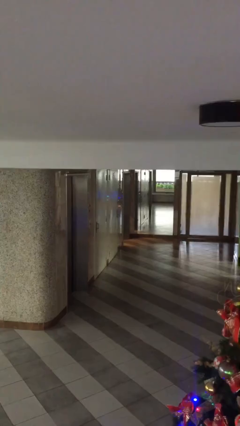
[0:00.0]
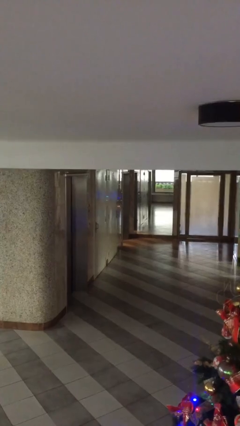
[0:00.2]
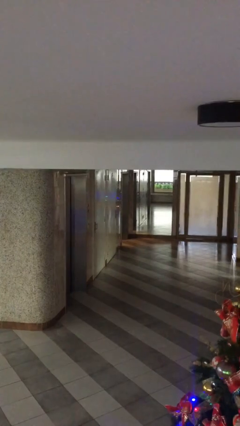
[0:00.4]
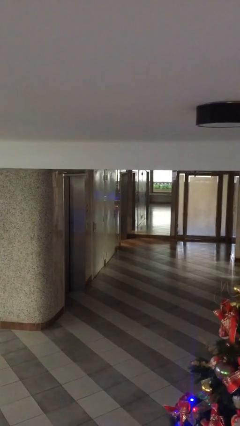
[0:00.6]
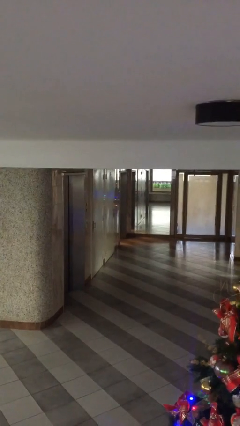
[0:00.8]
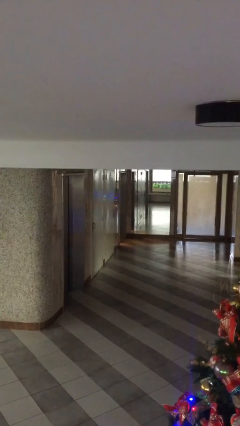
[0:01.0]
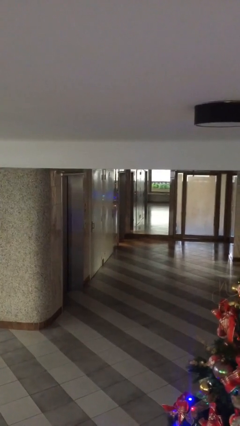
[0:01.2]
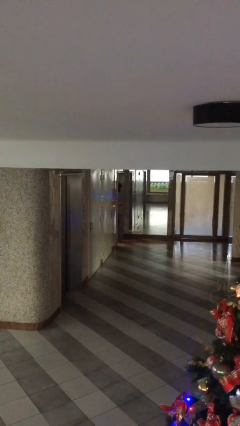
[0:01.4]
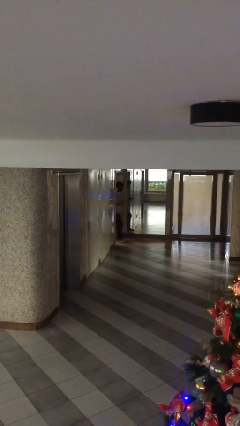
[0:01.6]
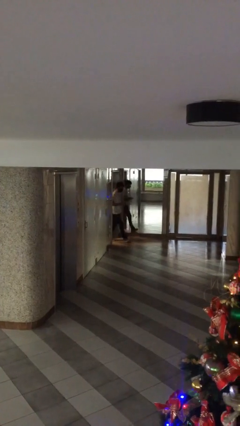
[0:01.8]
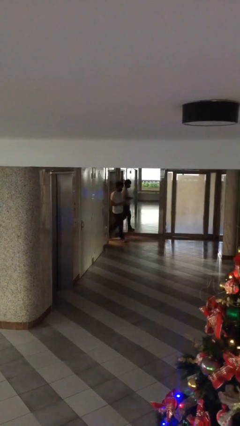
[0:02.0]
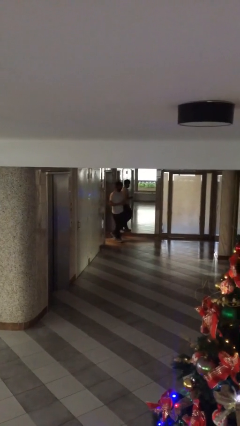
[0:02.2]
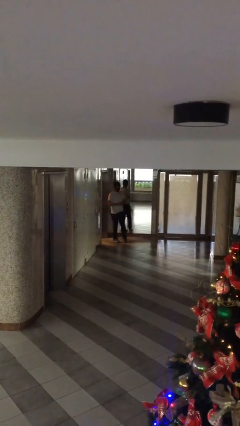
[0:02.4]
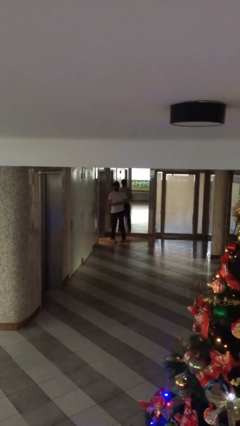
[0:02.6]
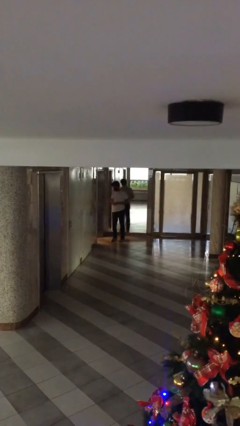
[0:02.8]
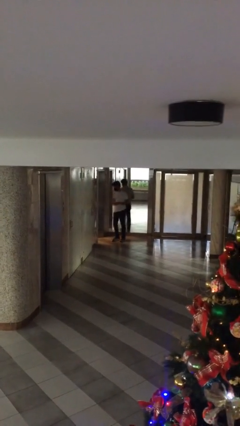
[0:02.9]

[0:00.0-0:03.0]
person enters scene through structure

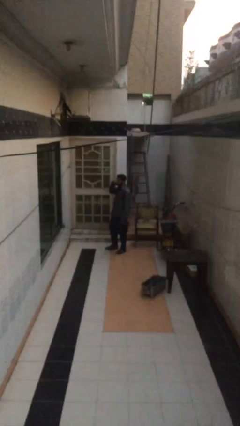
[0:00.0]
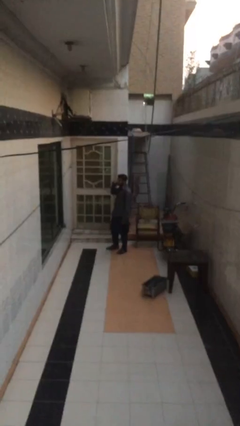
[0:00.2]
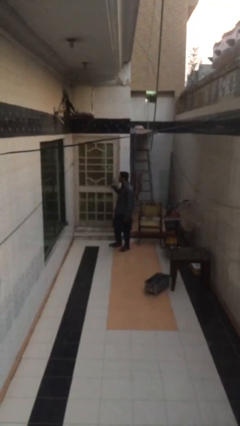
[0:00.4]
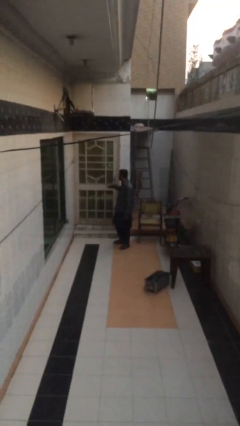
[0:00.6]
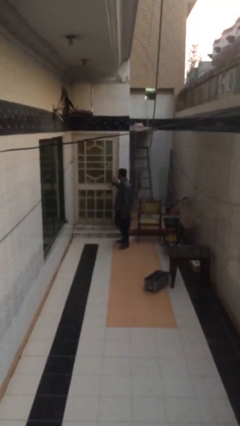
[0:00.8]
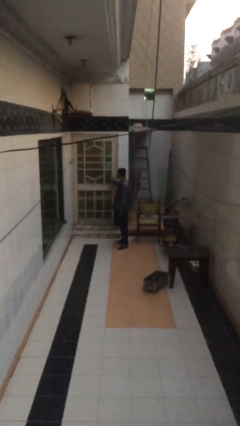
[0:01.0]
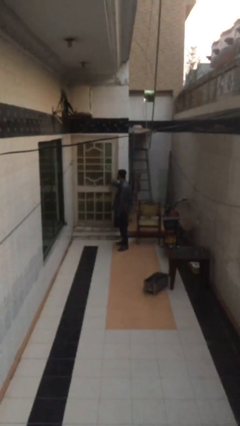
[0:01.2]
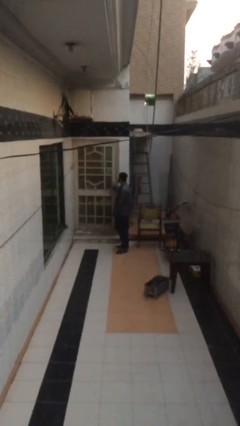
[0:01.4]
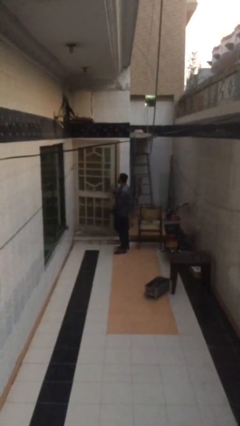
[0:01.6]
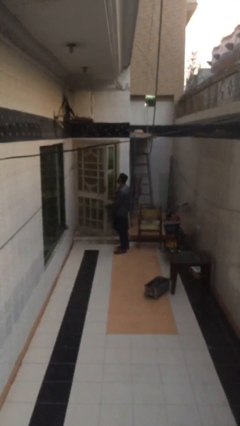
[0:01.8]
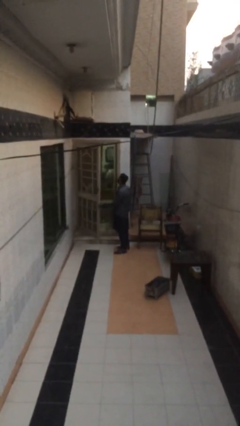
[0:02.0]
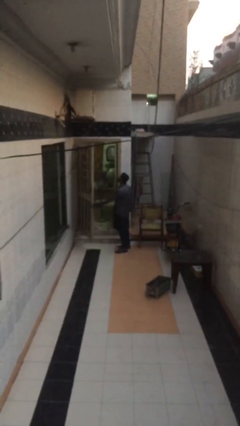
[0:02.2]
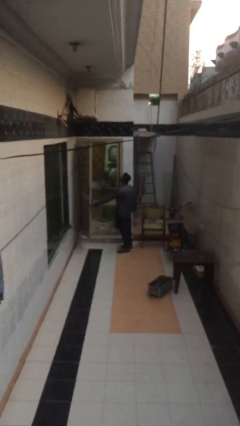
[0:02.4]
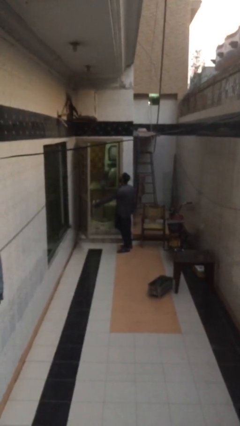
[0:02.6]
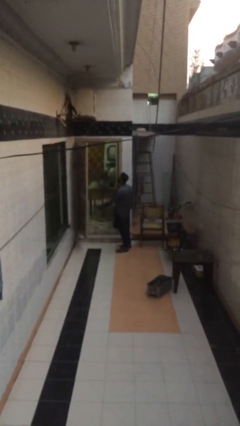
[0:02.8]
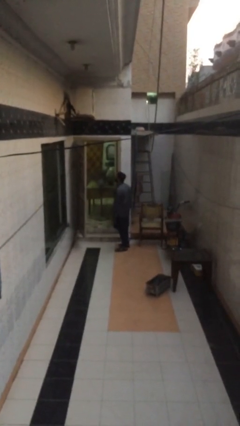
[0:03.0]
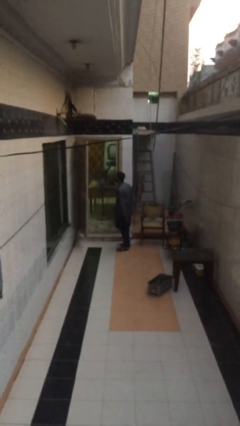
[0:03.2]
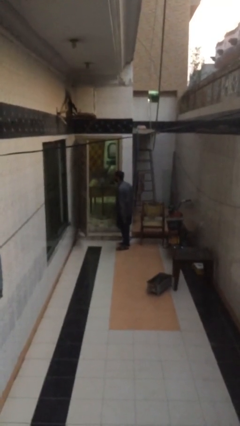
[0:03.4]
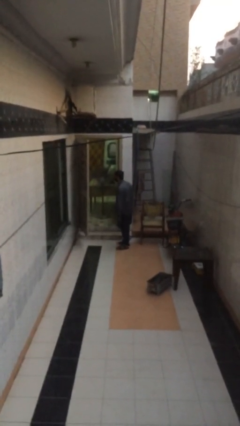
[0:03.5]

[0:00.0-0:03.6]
person opens facility door

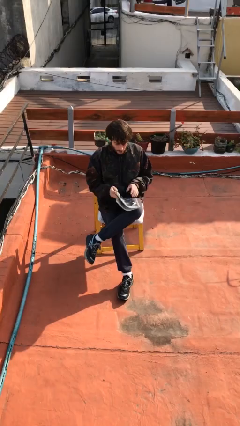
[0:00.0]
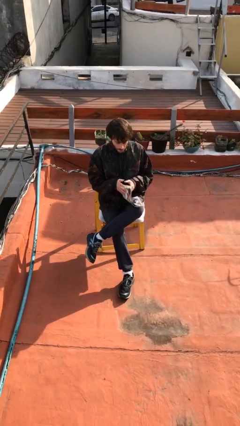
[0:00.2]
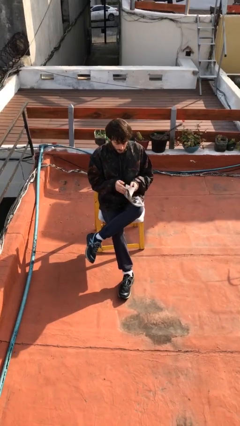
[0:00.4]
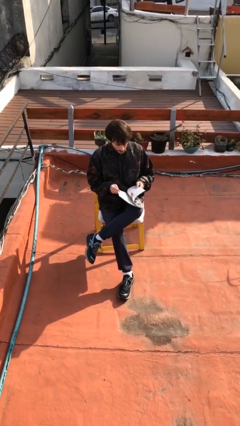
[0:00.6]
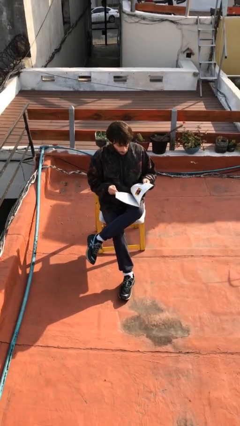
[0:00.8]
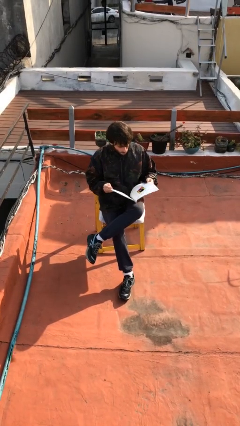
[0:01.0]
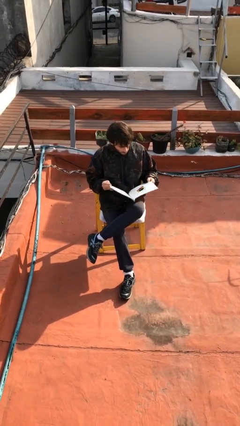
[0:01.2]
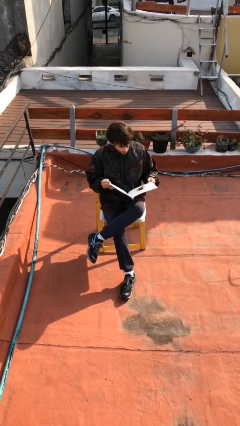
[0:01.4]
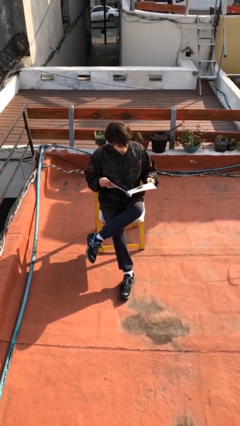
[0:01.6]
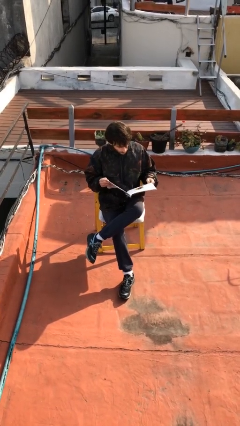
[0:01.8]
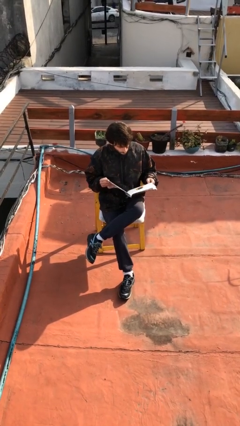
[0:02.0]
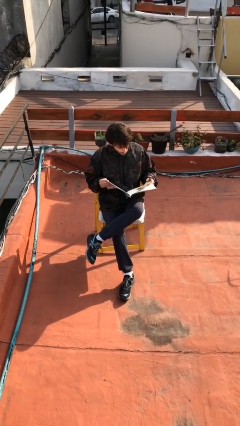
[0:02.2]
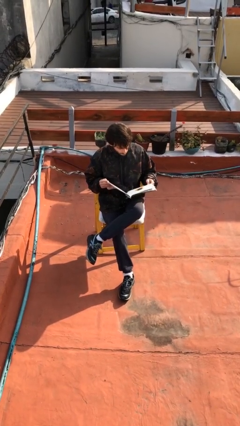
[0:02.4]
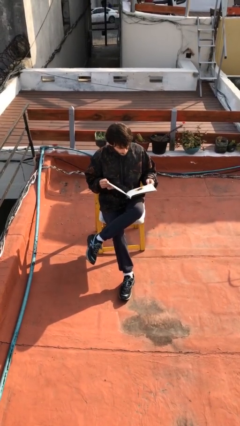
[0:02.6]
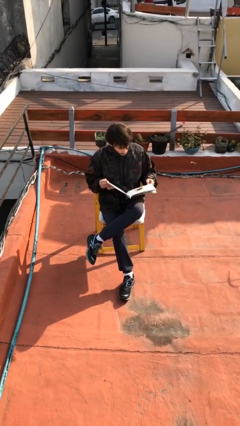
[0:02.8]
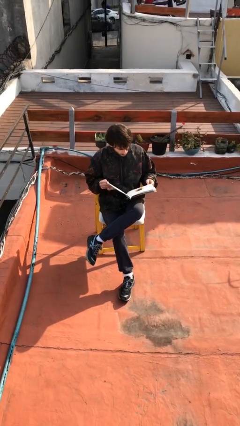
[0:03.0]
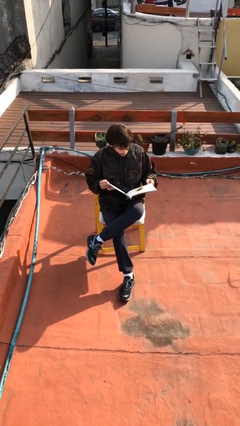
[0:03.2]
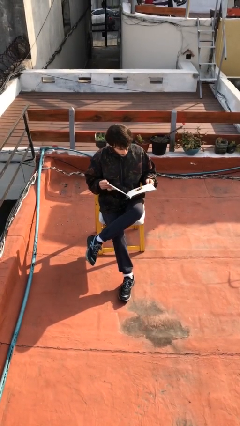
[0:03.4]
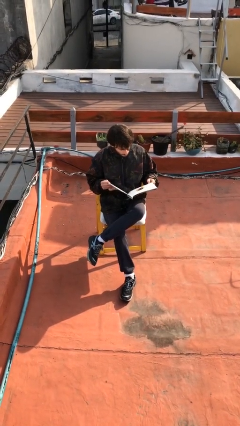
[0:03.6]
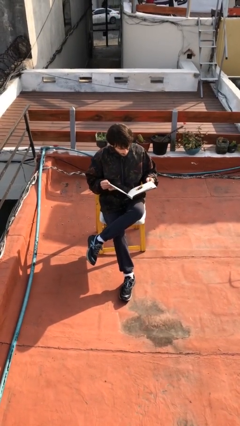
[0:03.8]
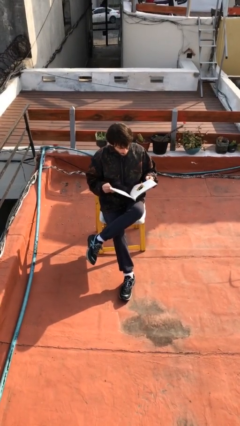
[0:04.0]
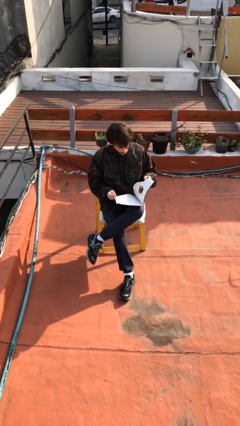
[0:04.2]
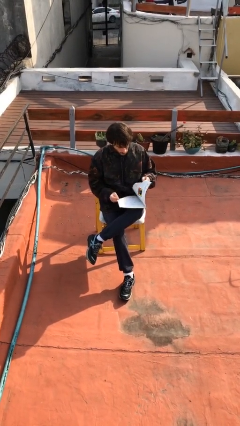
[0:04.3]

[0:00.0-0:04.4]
person reads magazine

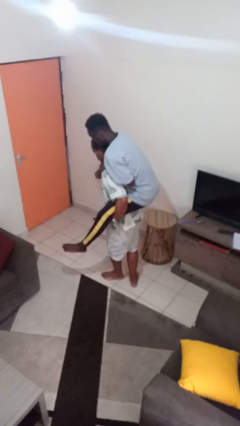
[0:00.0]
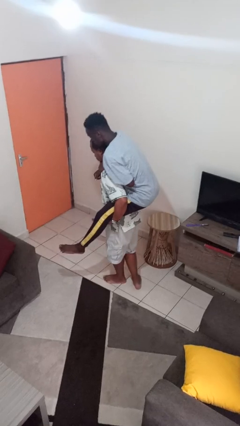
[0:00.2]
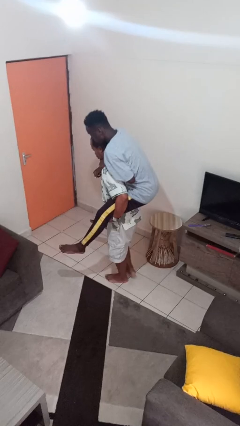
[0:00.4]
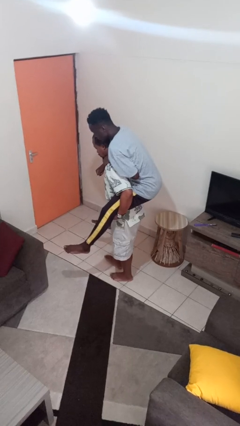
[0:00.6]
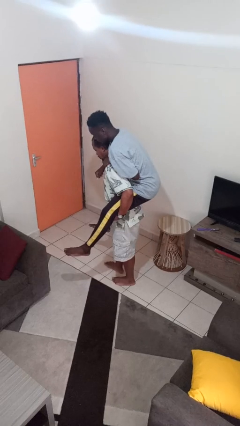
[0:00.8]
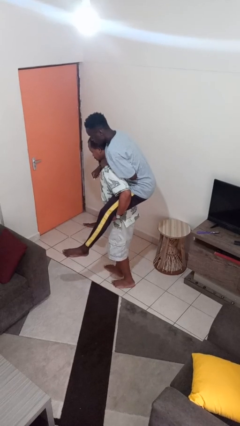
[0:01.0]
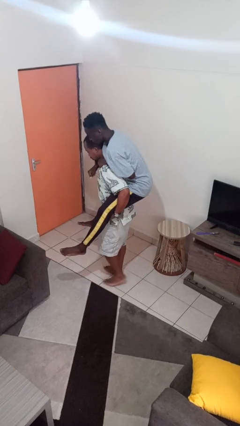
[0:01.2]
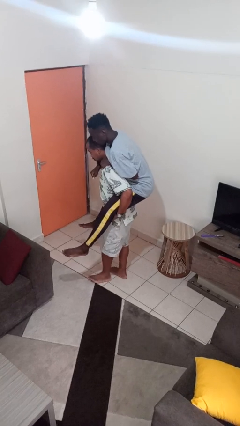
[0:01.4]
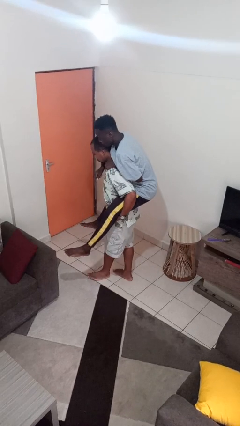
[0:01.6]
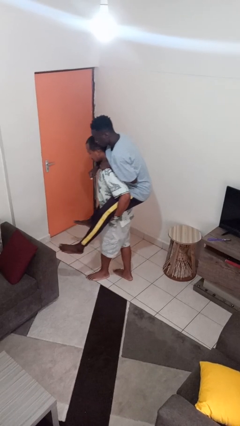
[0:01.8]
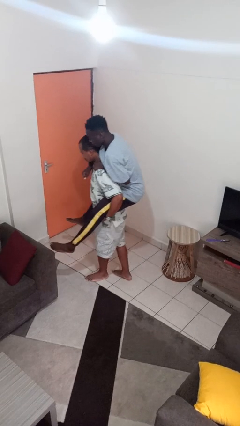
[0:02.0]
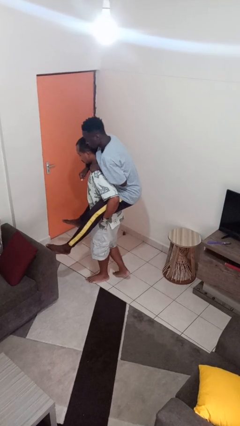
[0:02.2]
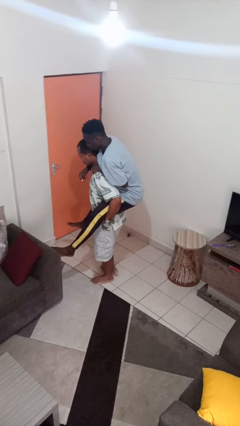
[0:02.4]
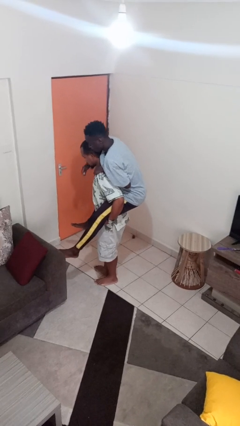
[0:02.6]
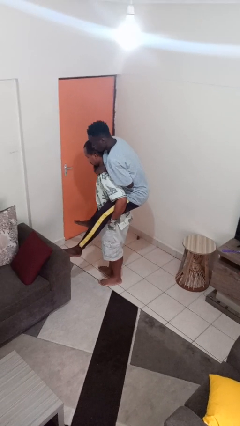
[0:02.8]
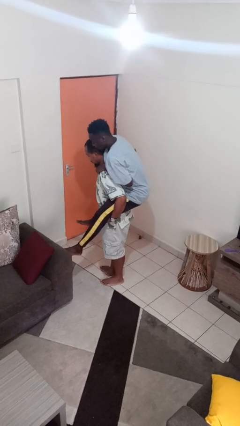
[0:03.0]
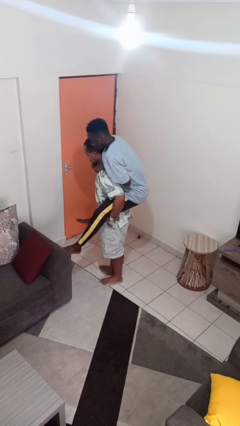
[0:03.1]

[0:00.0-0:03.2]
person carries person on back

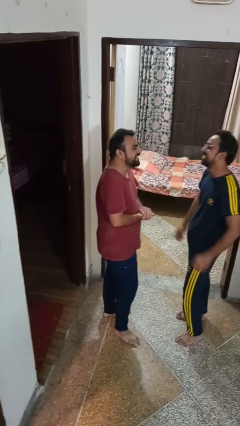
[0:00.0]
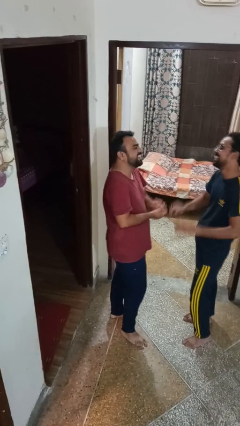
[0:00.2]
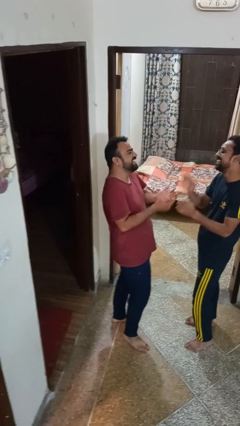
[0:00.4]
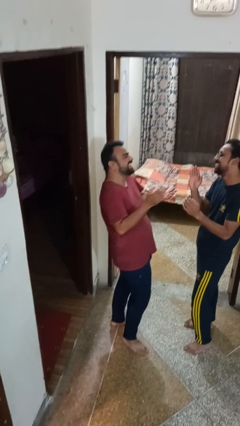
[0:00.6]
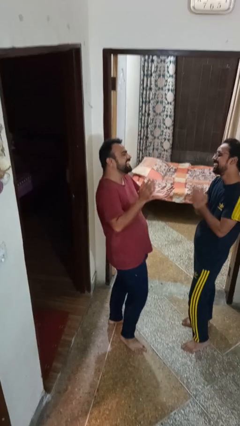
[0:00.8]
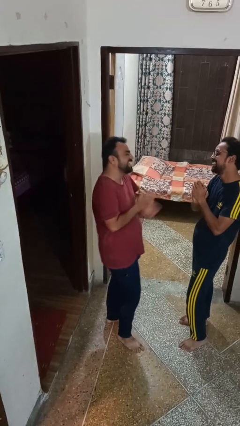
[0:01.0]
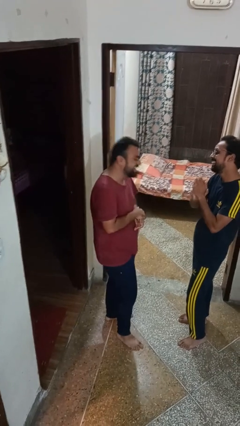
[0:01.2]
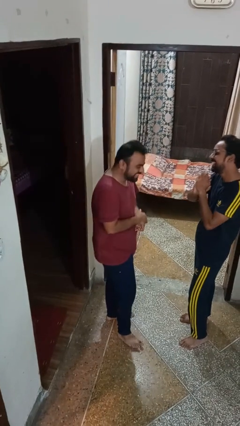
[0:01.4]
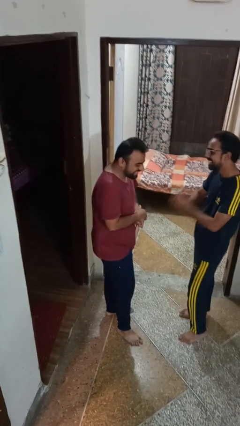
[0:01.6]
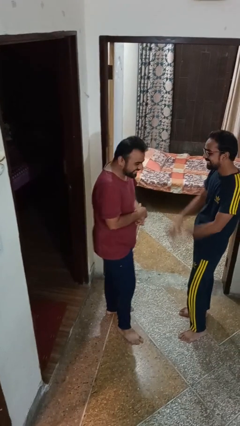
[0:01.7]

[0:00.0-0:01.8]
person laughs with person

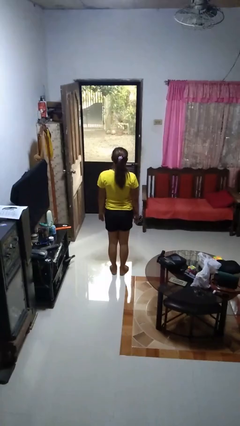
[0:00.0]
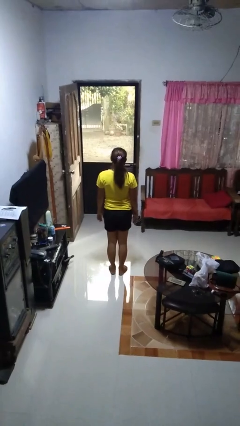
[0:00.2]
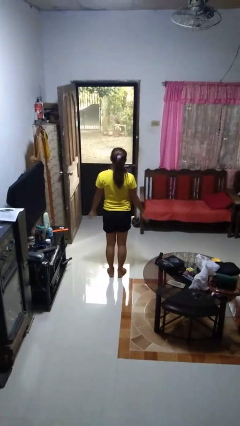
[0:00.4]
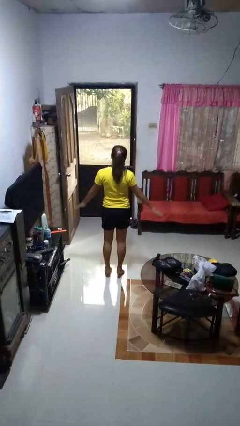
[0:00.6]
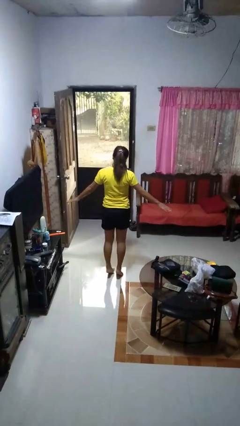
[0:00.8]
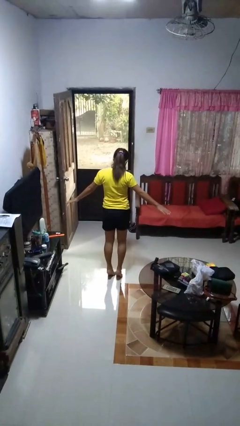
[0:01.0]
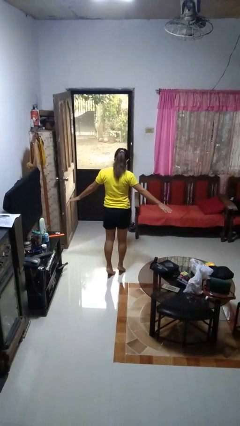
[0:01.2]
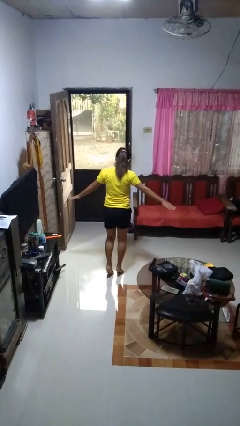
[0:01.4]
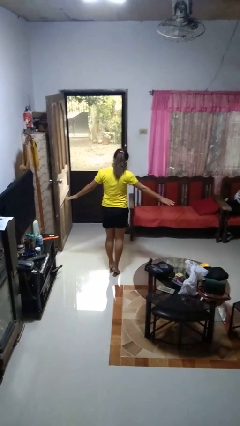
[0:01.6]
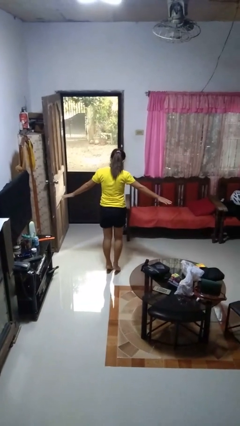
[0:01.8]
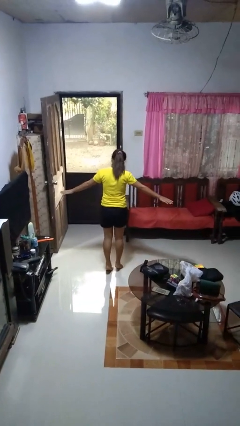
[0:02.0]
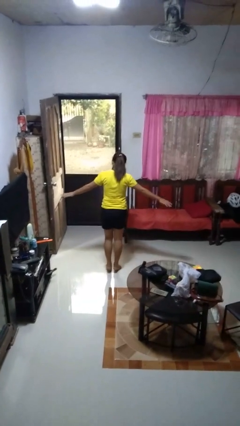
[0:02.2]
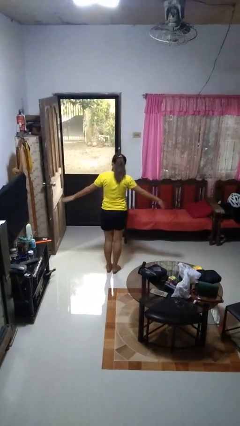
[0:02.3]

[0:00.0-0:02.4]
person walks tiptoe
